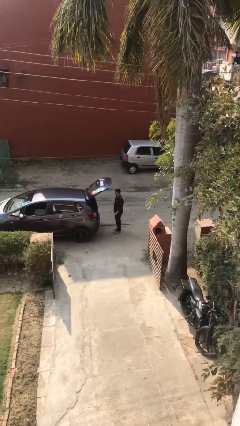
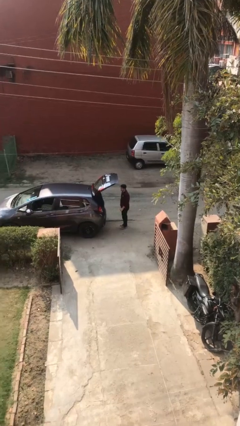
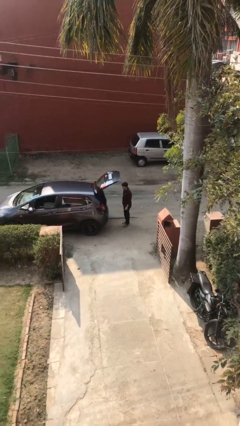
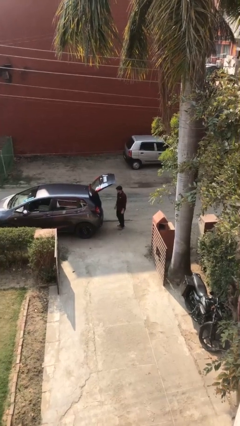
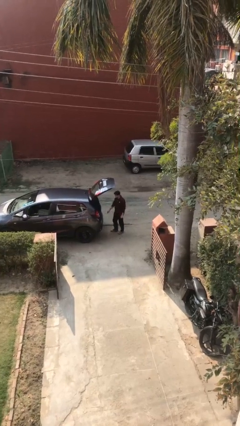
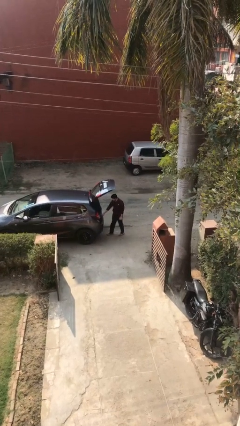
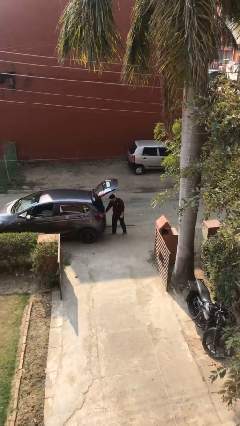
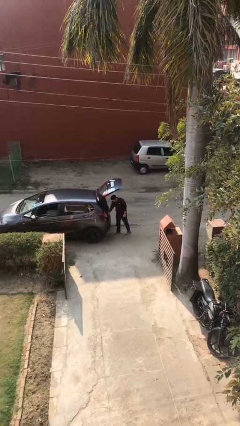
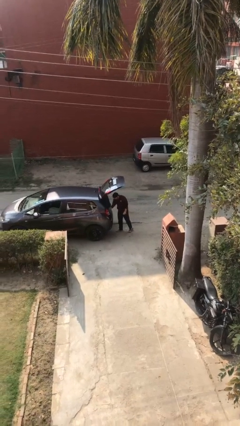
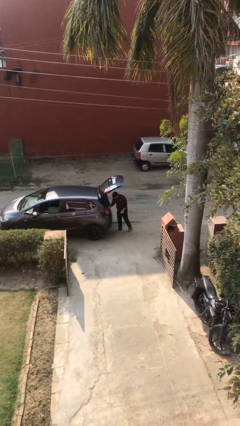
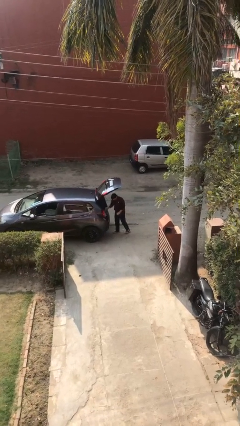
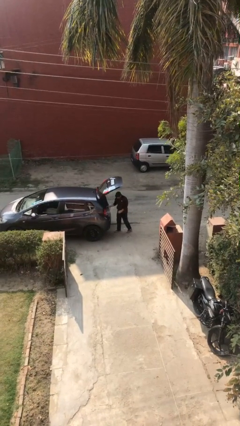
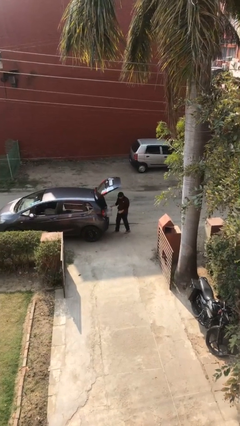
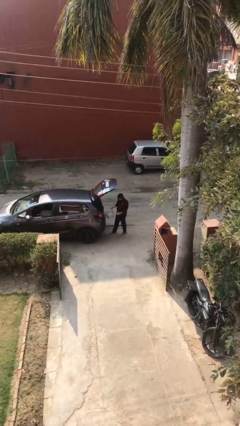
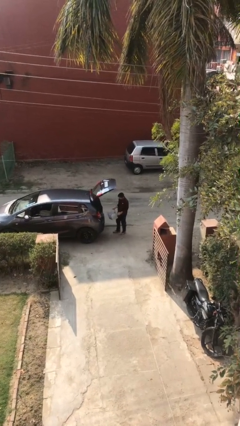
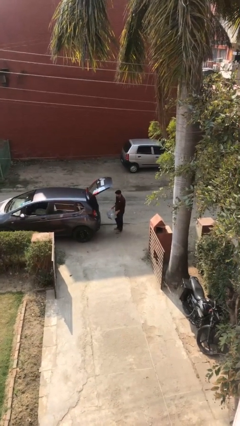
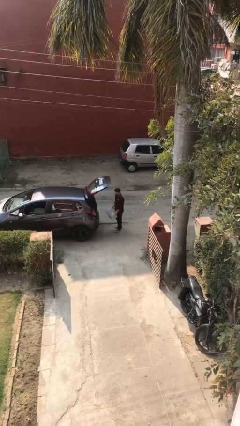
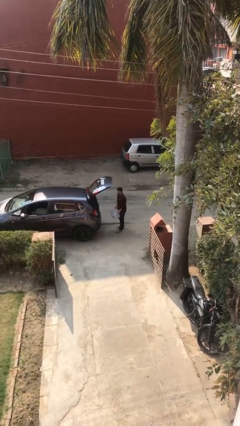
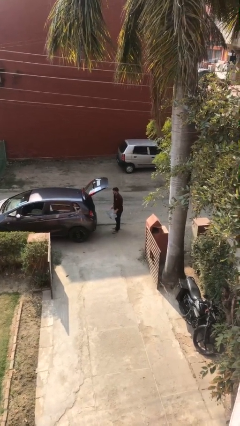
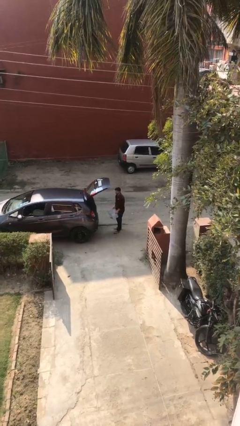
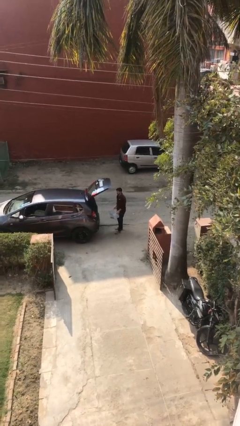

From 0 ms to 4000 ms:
person unloads car

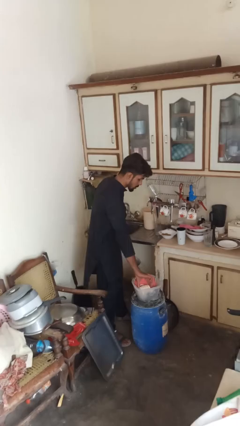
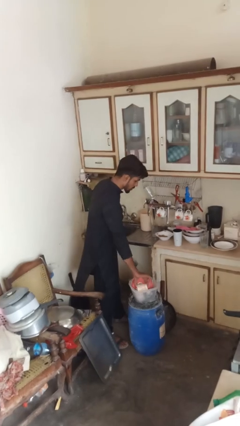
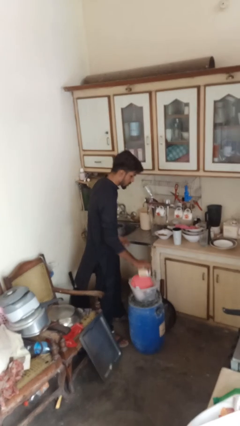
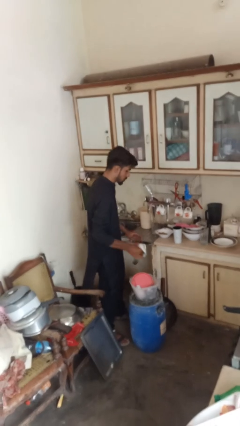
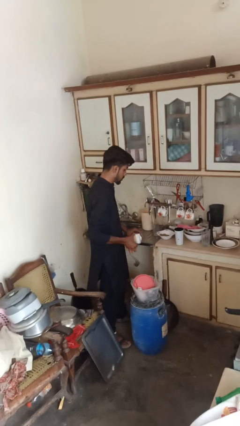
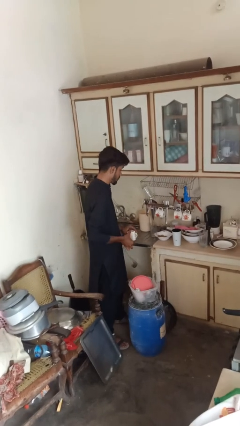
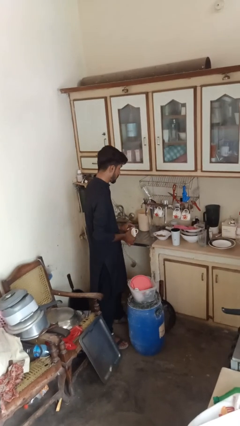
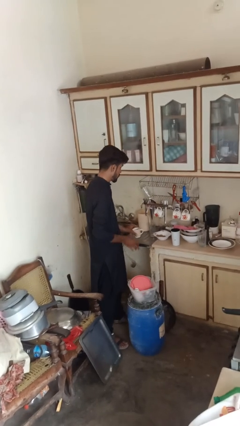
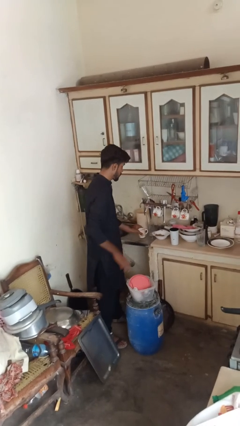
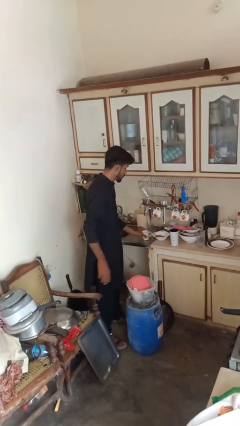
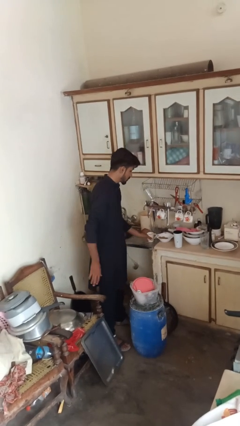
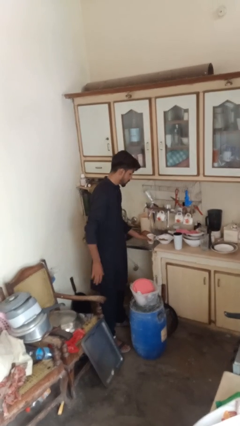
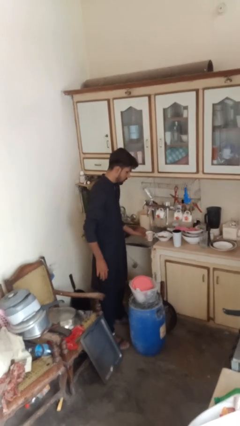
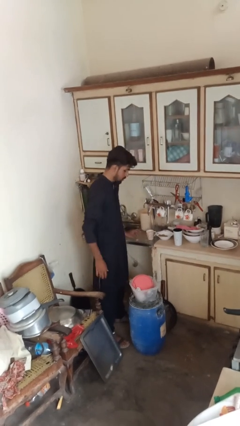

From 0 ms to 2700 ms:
person unloads dishwasher

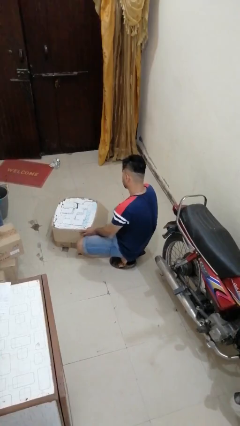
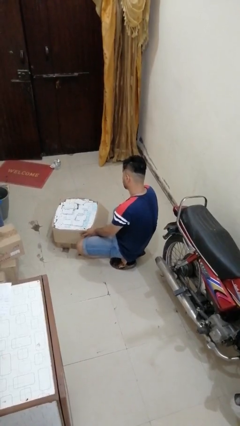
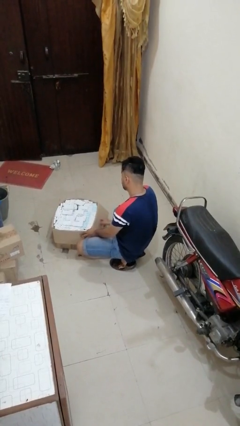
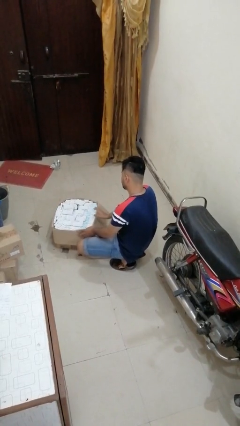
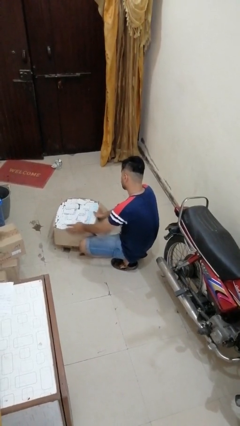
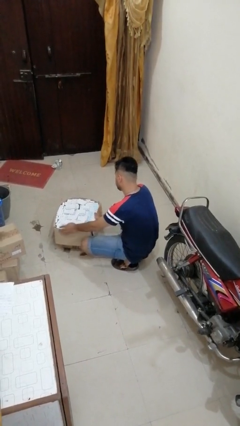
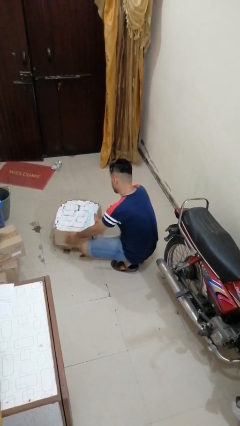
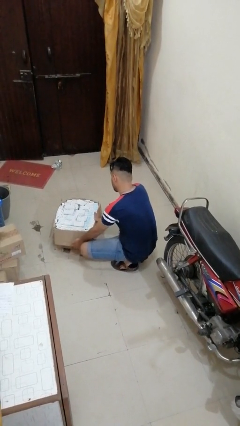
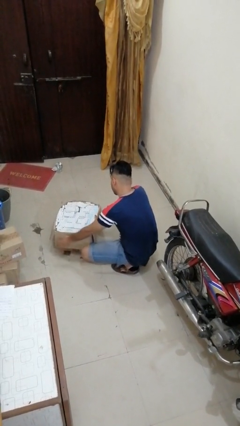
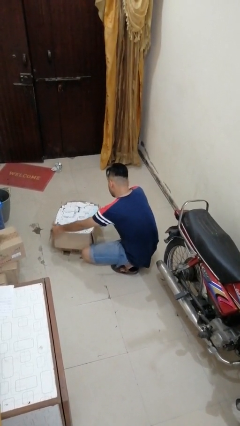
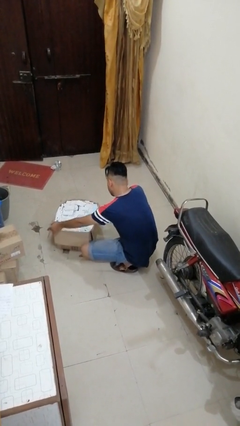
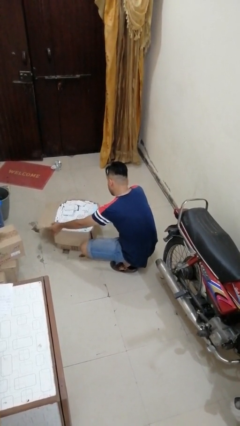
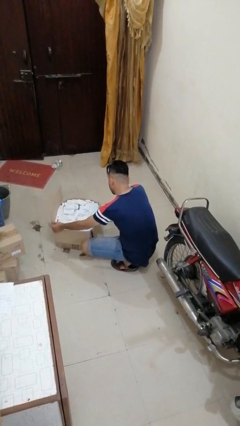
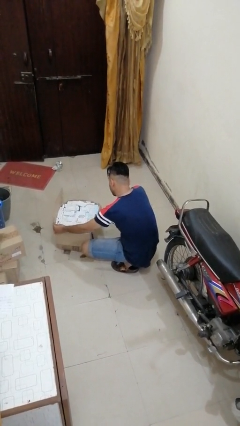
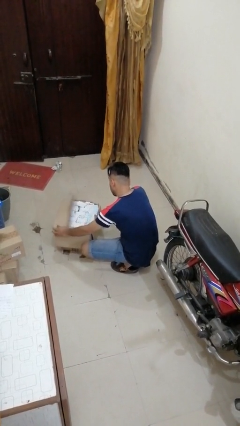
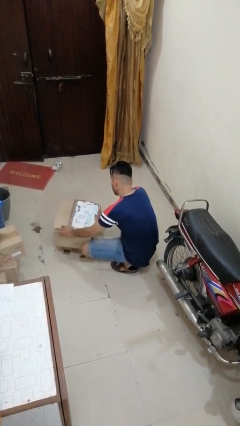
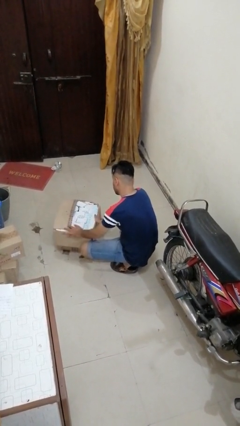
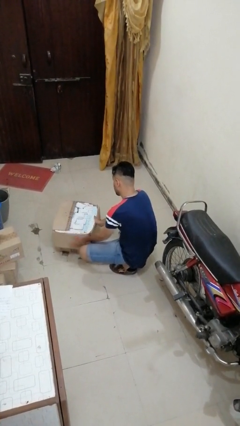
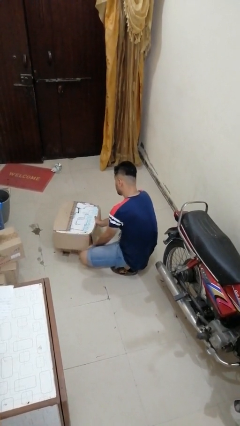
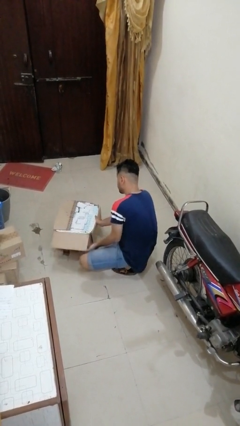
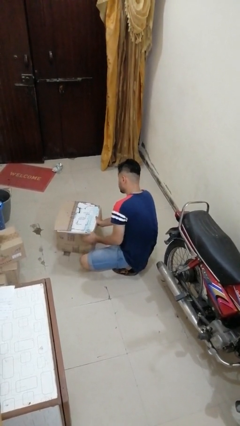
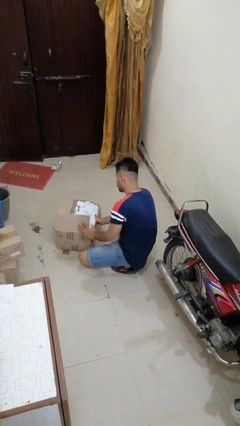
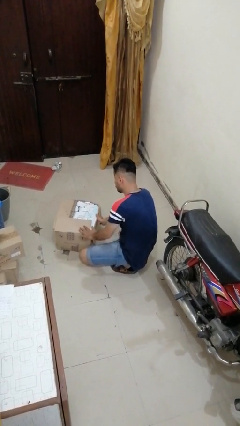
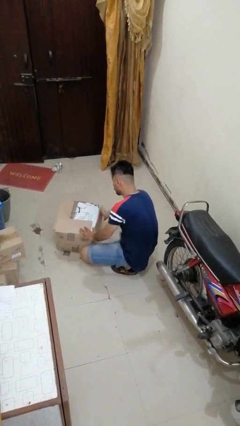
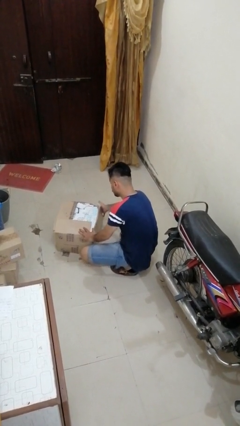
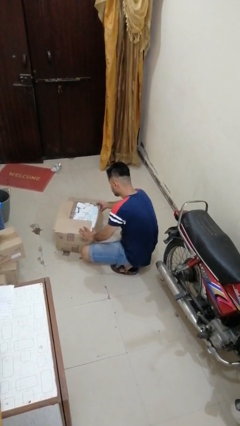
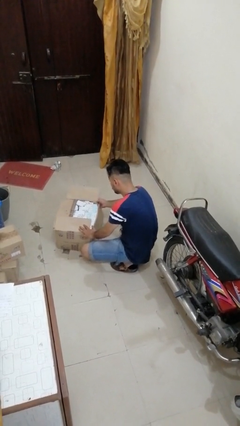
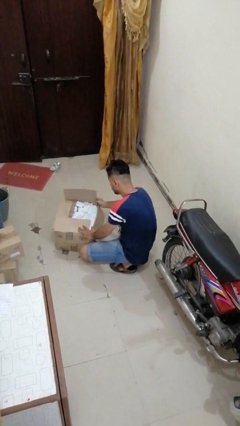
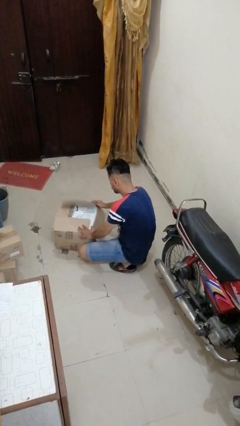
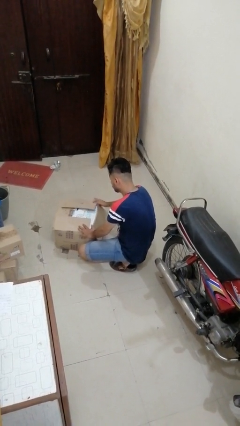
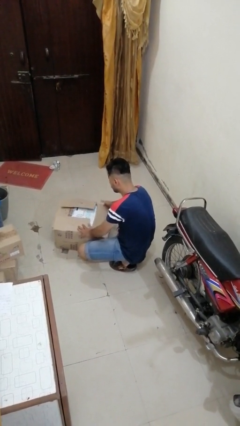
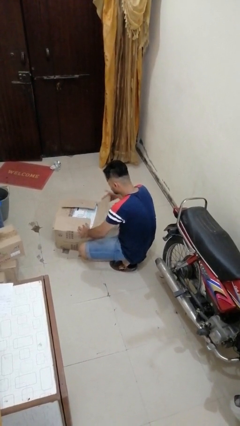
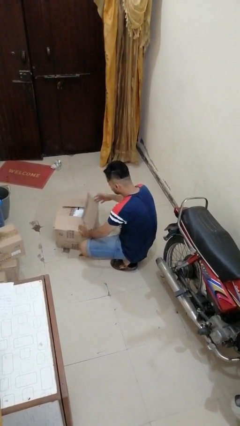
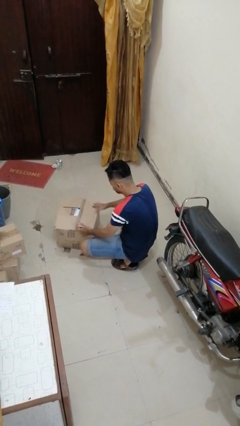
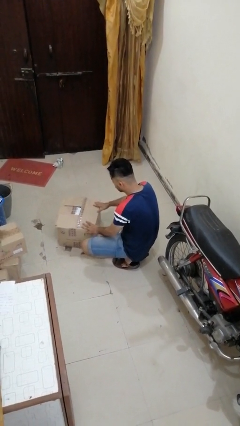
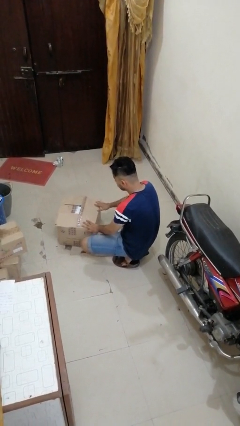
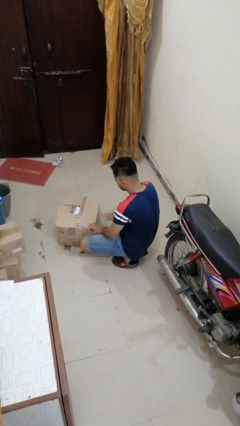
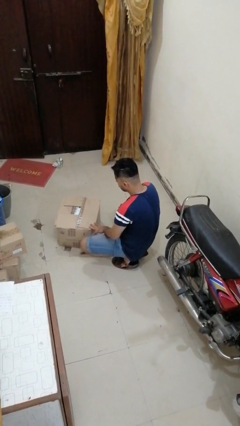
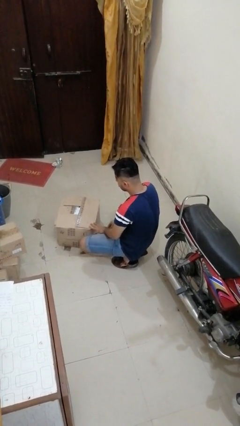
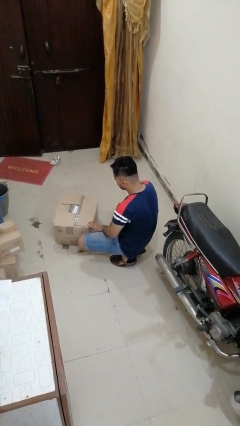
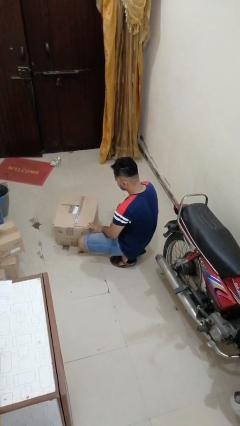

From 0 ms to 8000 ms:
person closes box

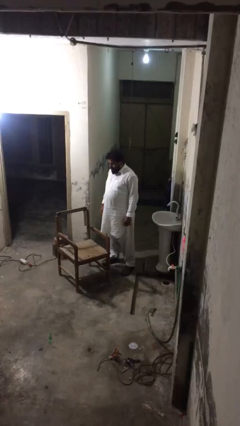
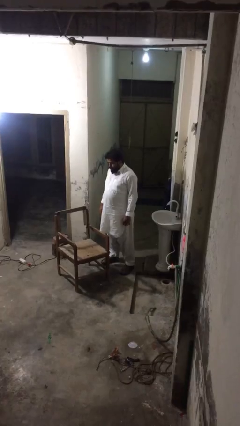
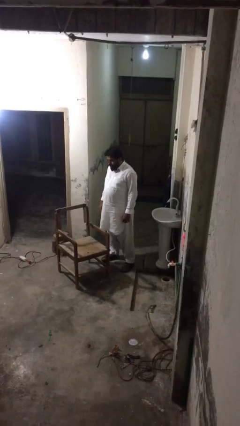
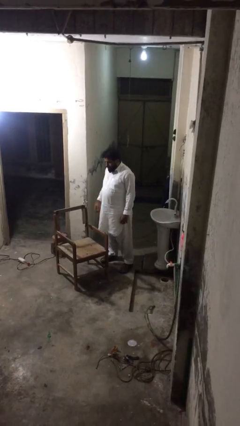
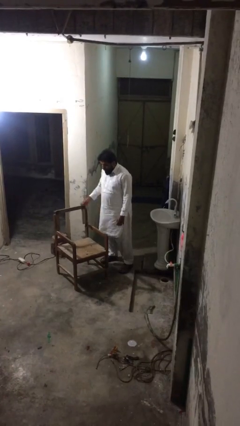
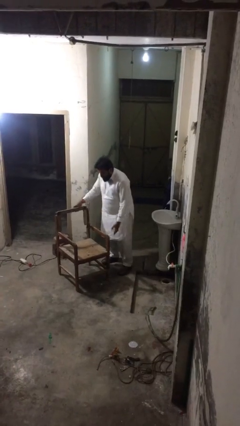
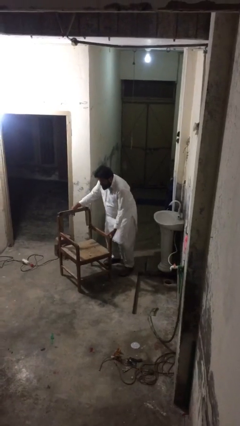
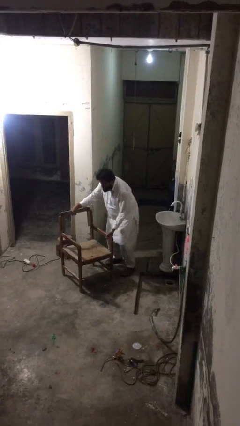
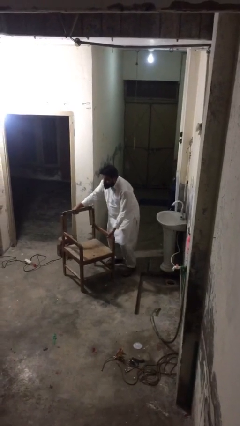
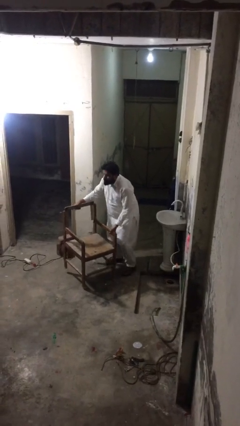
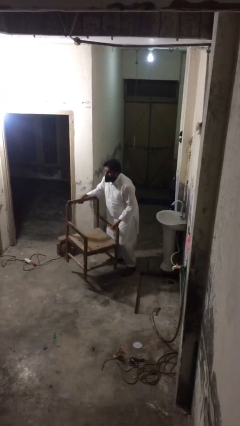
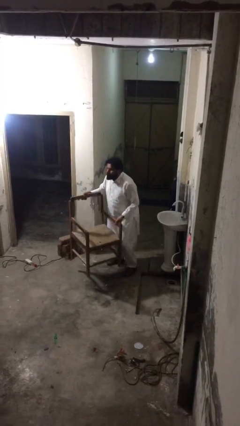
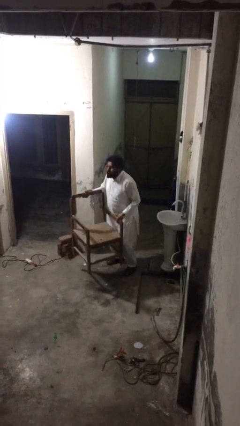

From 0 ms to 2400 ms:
person picks up object from floor

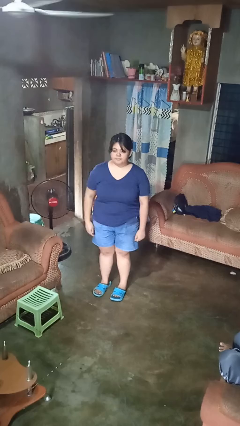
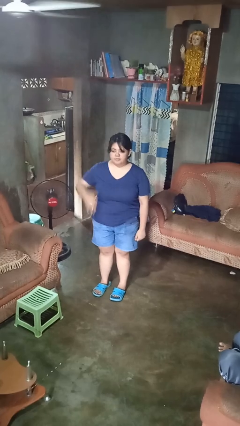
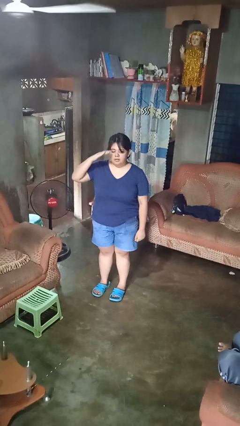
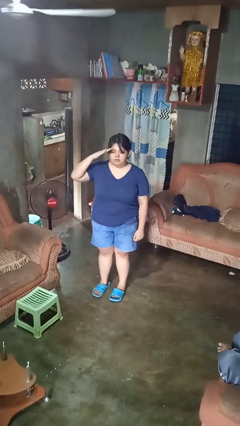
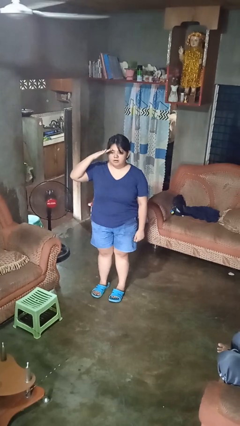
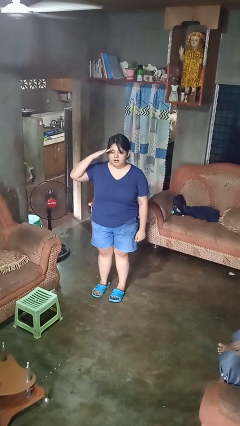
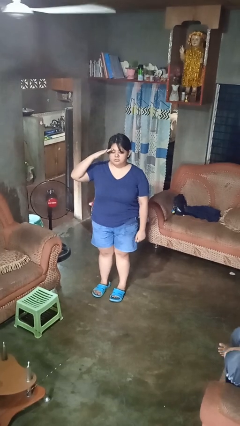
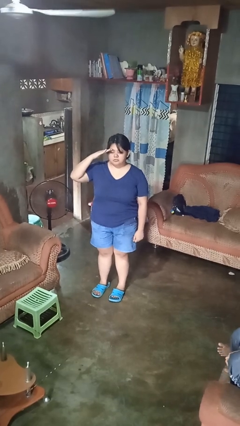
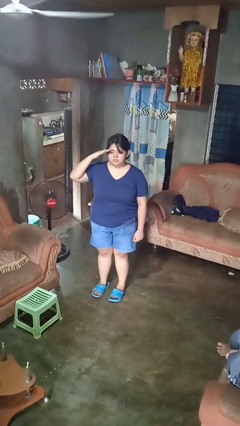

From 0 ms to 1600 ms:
person salutes
